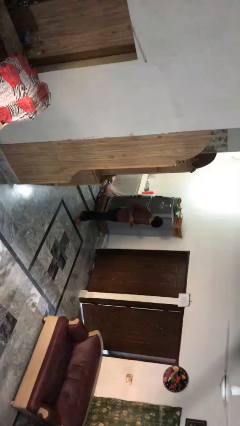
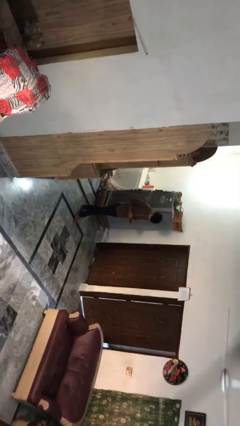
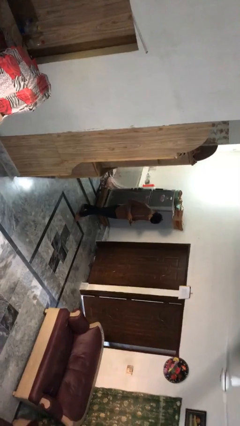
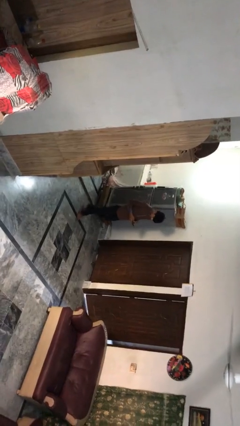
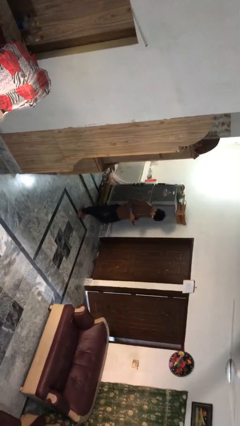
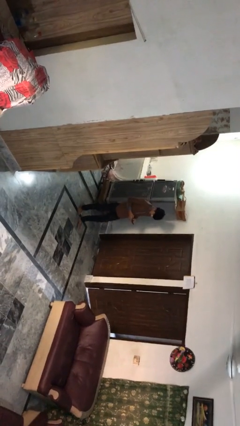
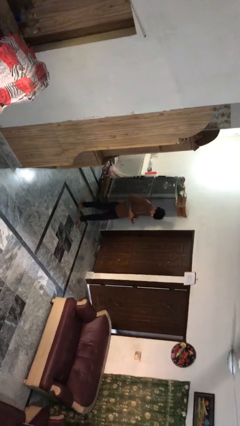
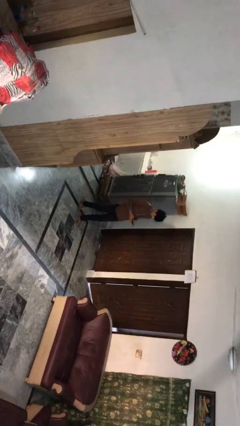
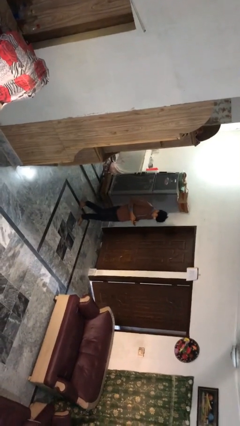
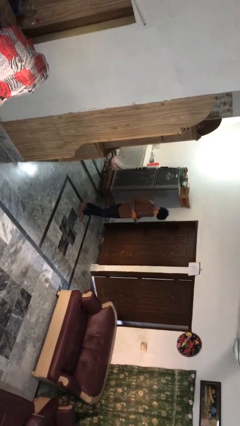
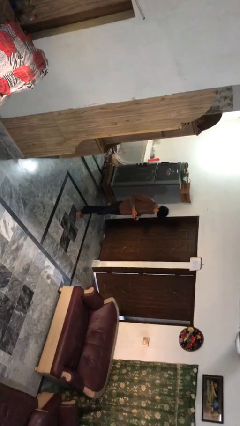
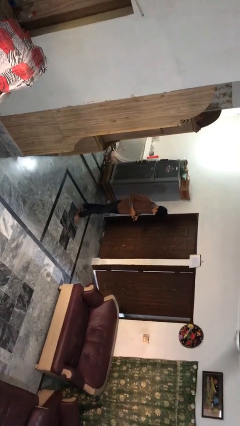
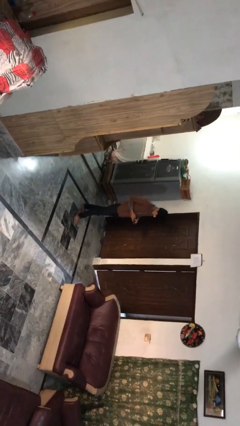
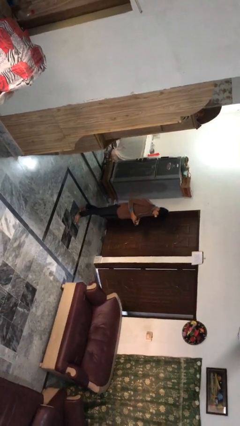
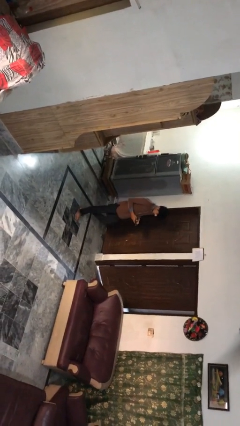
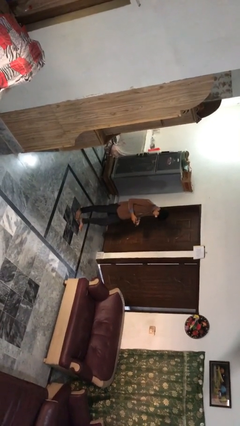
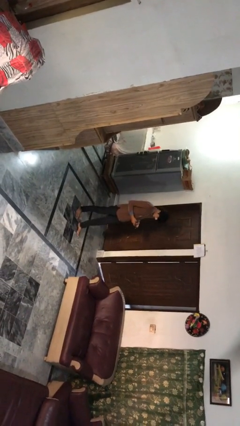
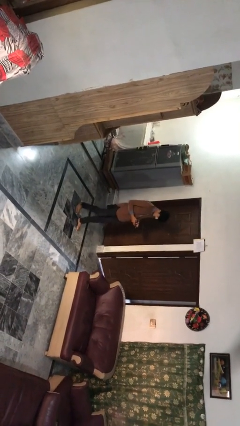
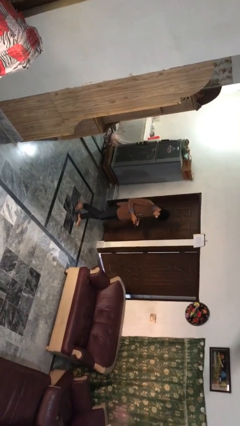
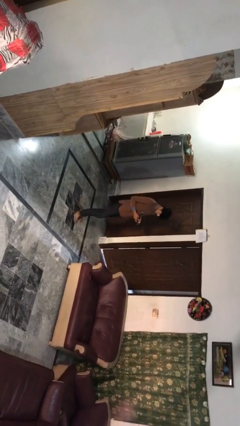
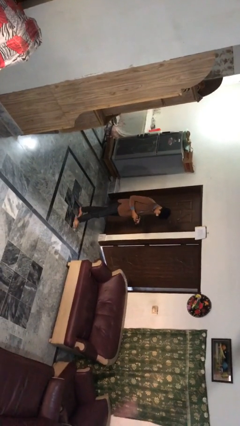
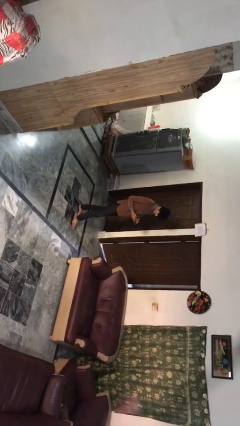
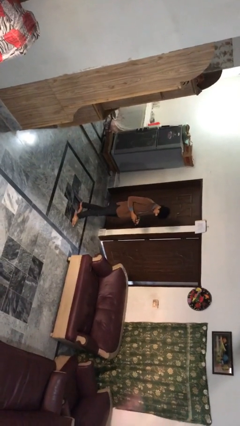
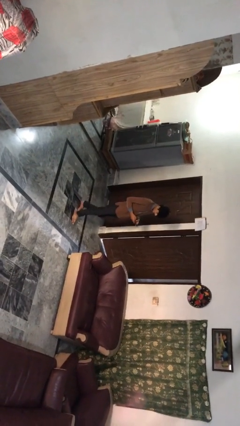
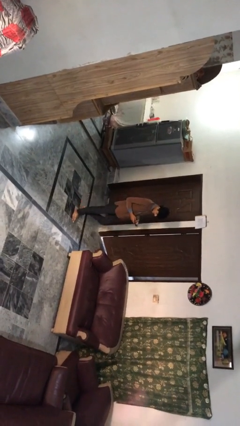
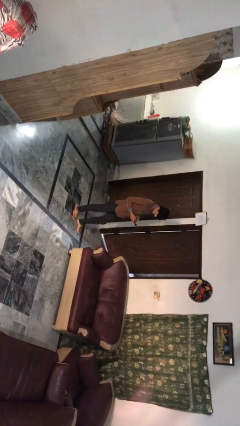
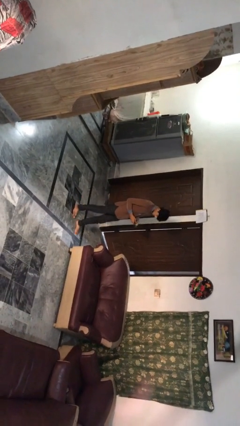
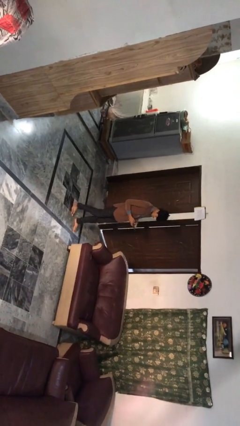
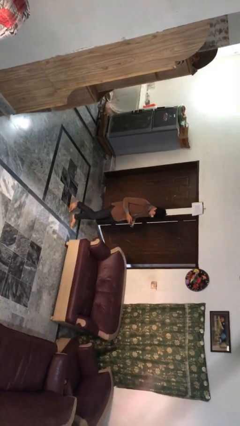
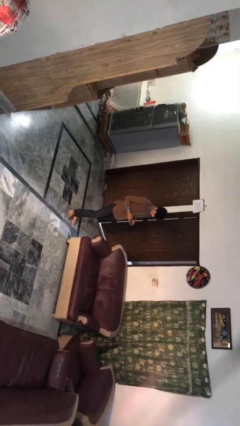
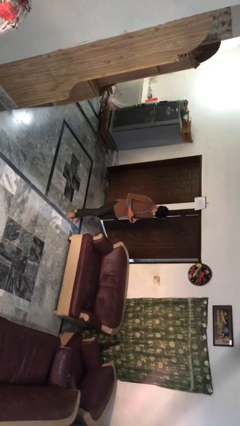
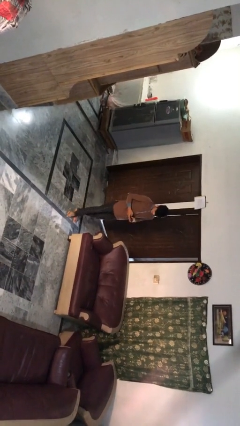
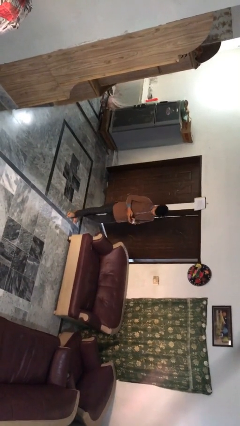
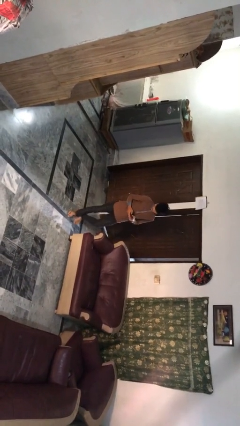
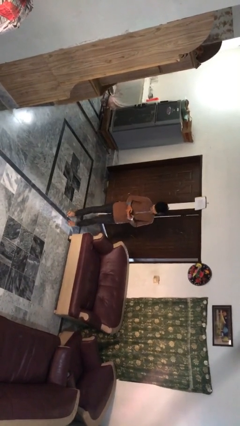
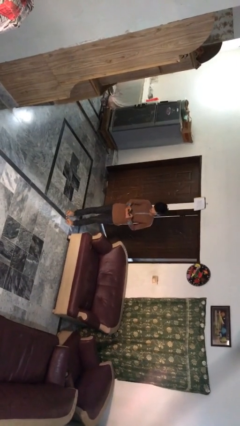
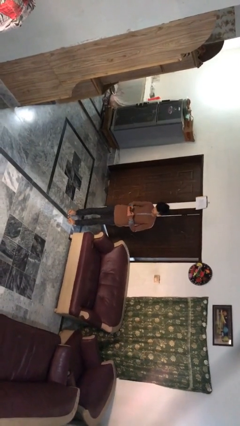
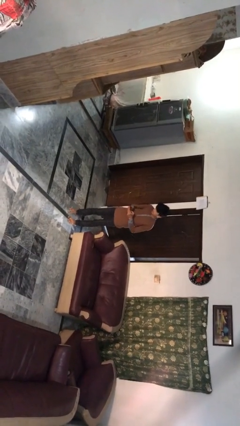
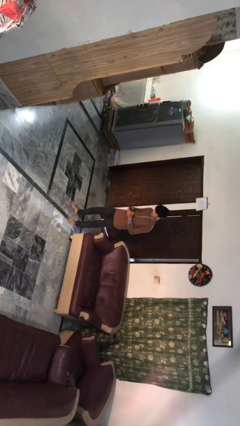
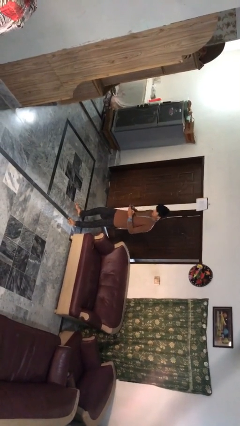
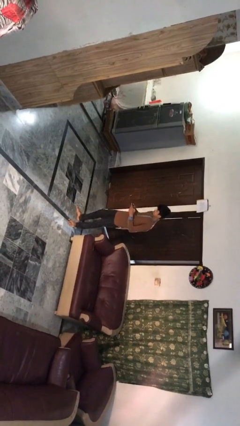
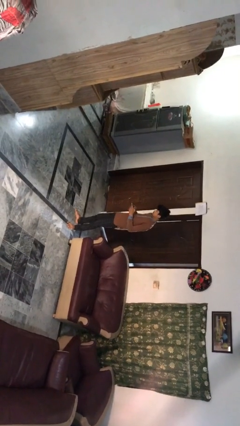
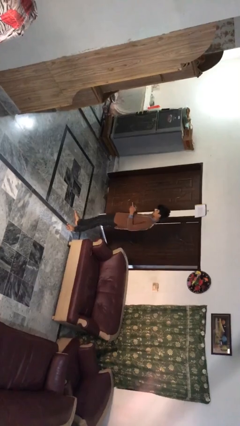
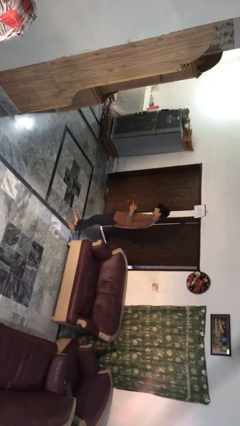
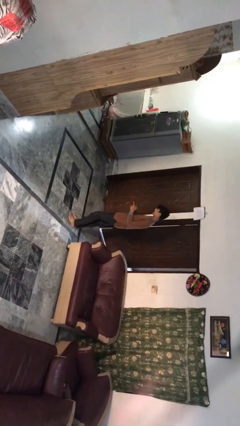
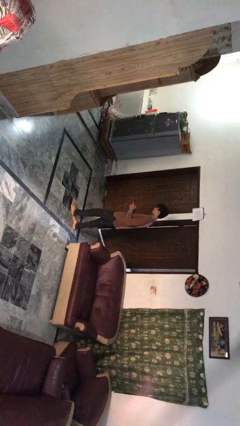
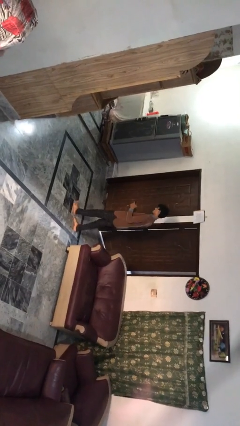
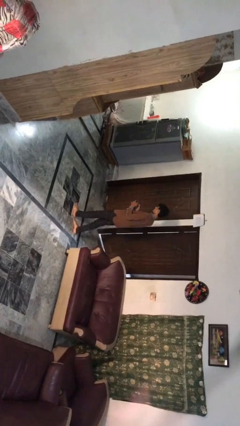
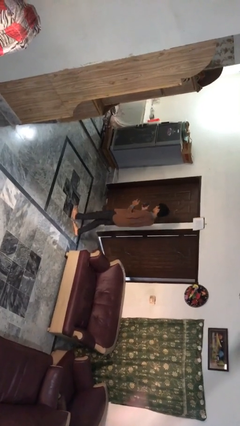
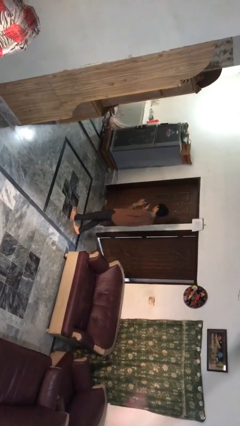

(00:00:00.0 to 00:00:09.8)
person texts on phone

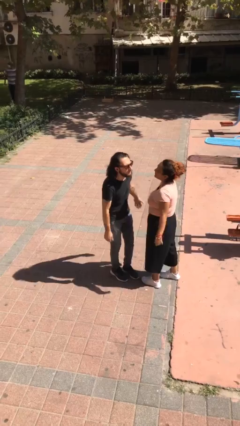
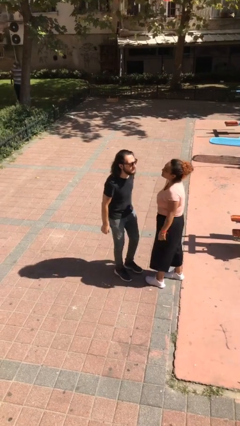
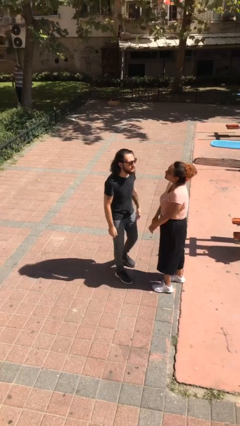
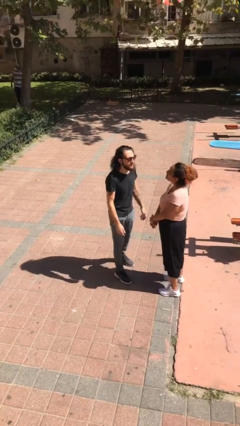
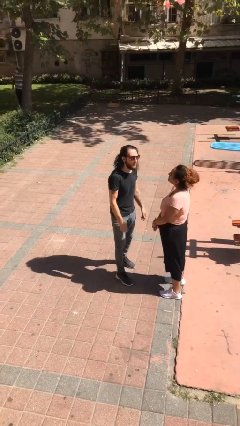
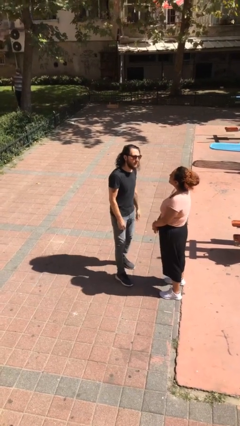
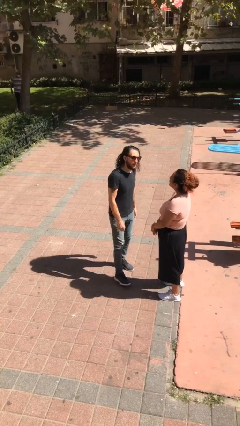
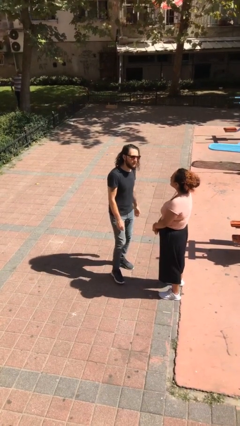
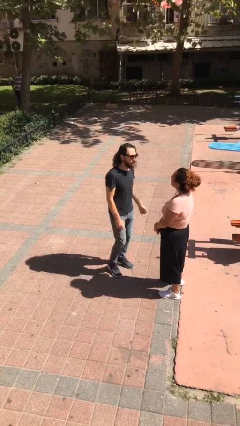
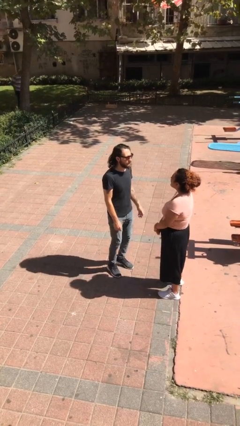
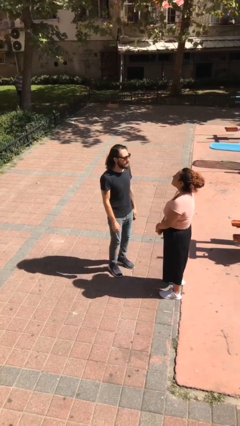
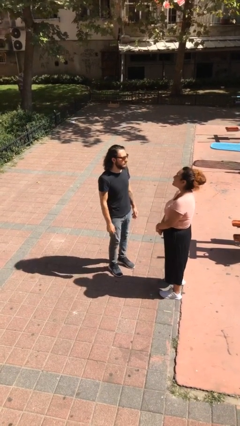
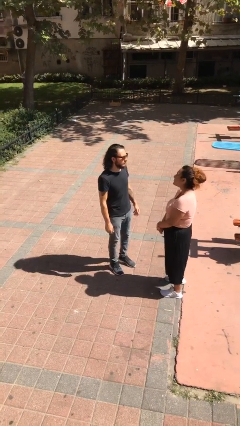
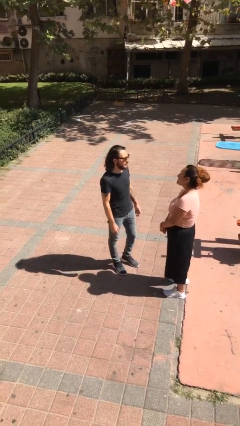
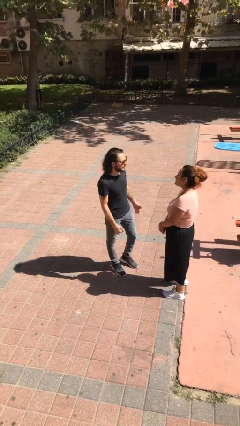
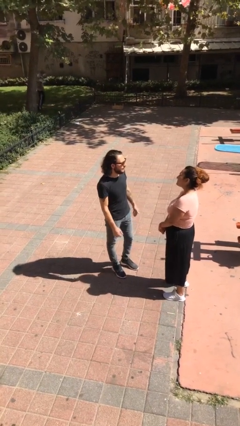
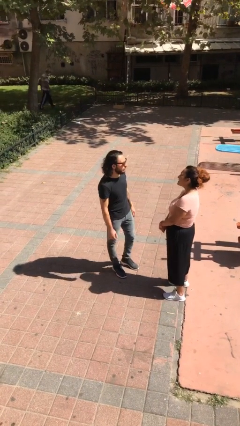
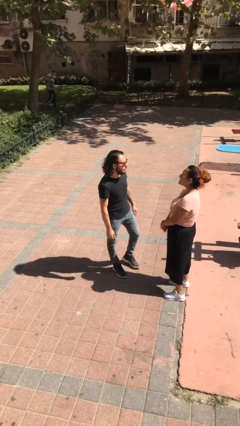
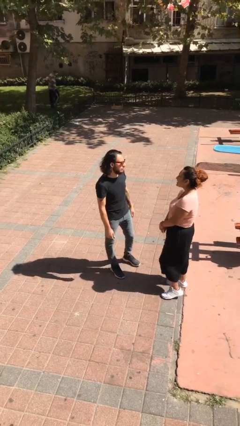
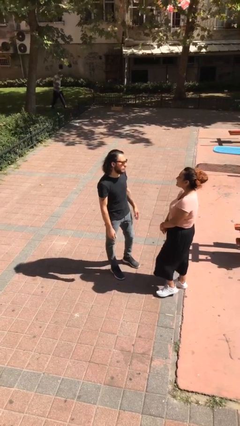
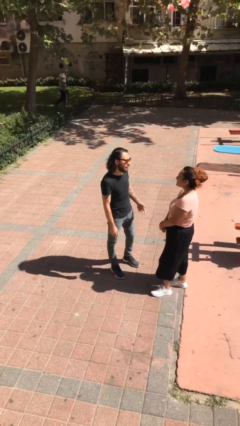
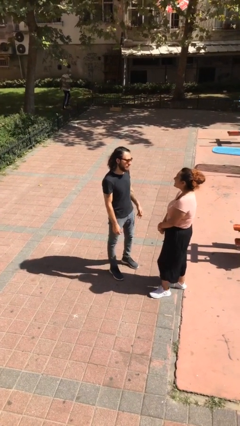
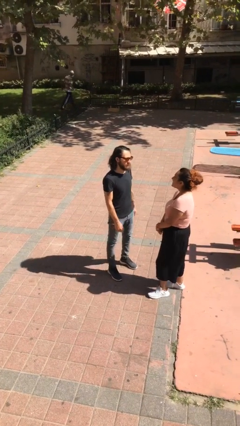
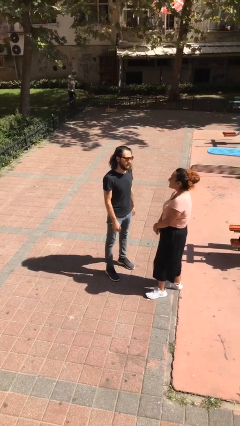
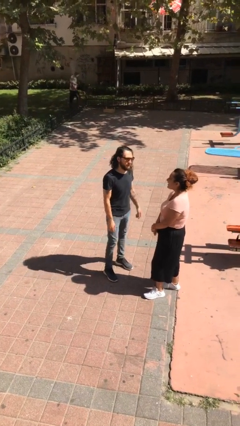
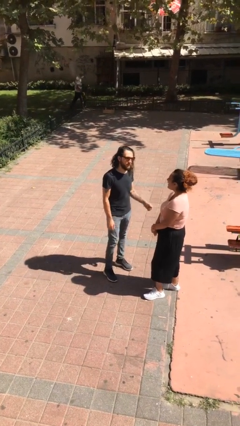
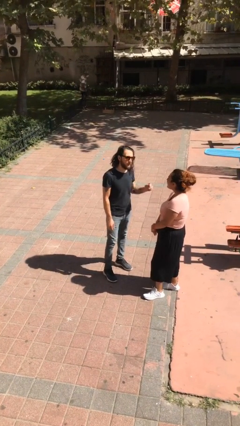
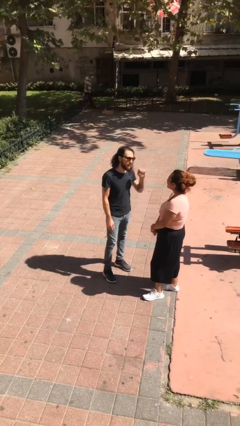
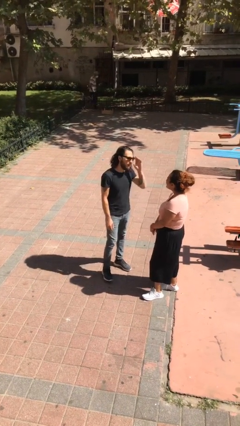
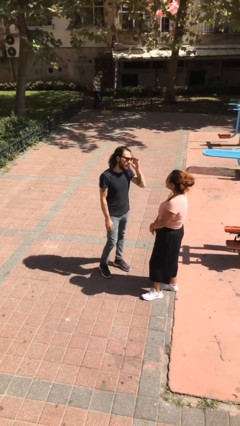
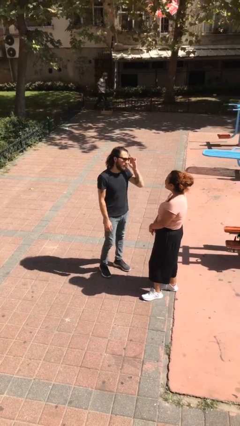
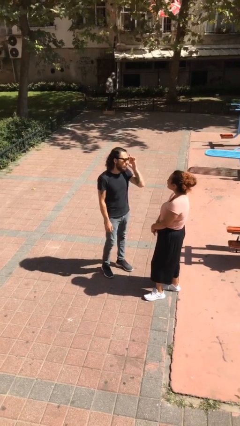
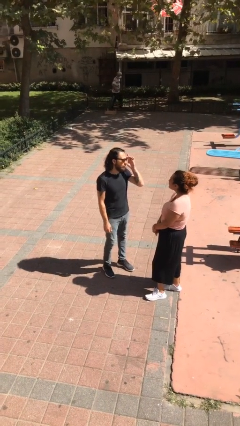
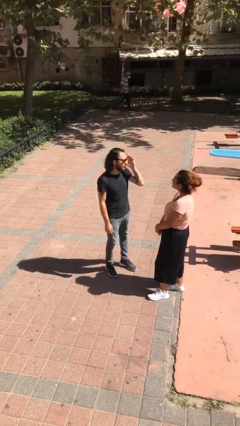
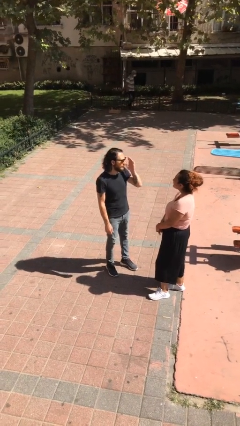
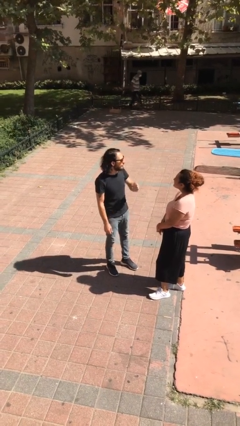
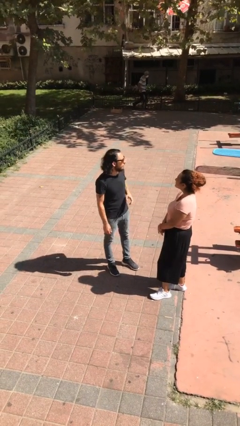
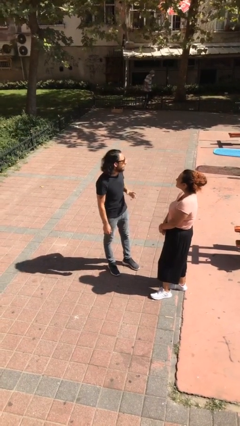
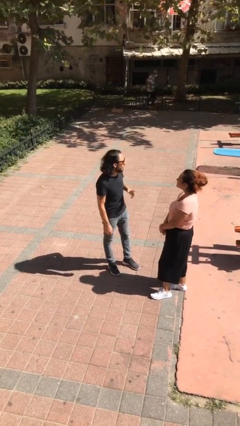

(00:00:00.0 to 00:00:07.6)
person talks to person

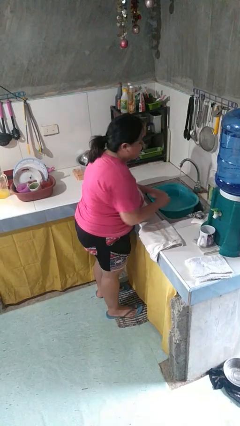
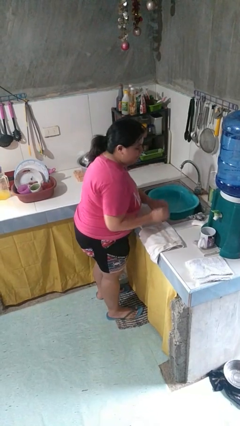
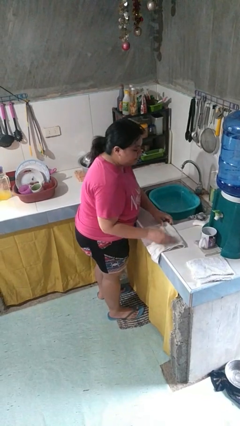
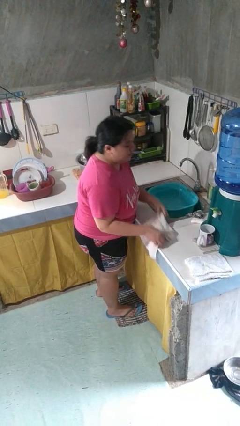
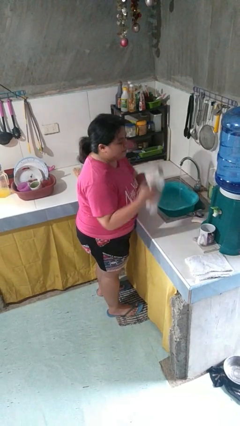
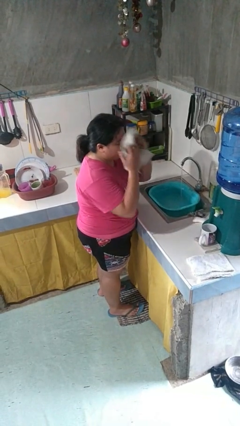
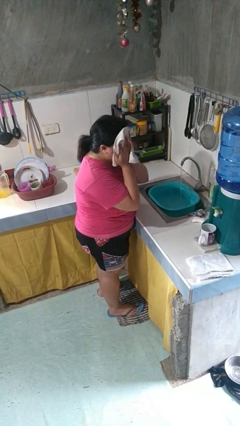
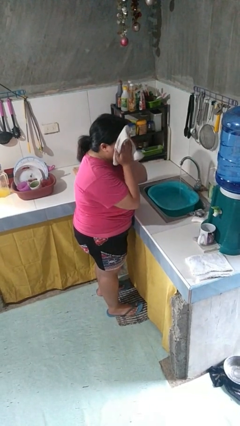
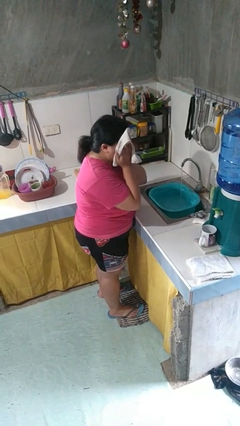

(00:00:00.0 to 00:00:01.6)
person dries face with towel
